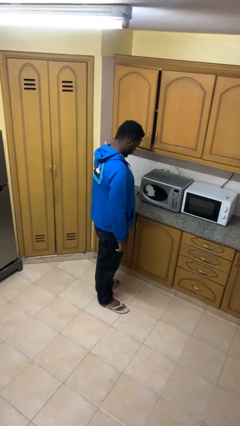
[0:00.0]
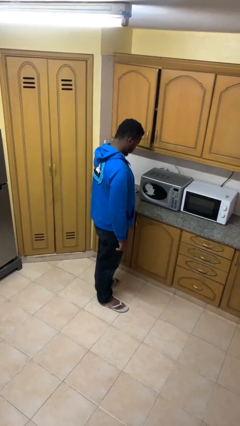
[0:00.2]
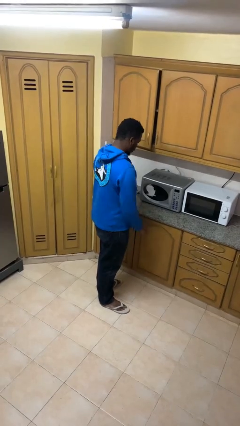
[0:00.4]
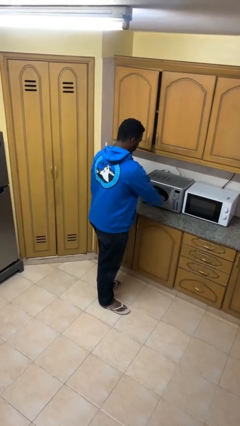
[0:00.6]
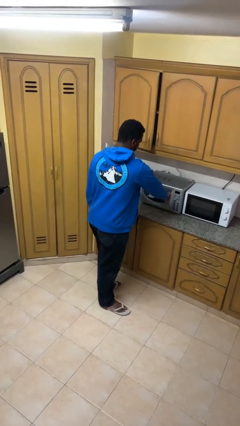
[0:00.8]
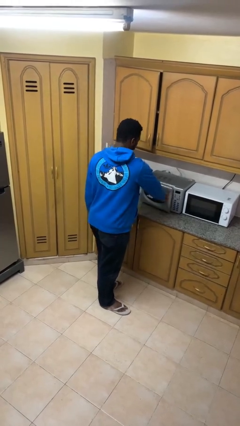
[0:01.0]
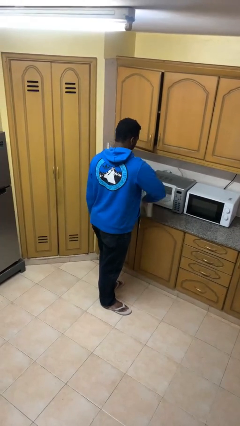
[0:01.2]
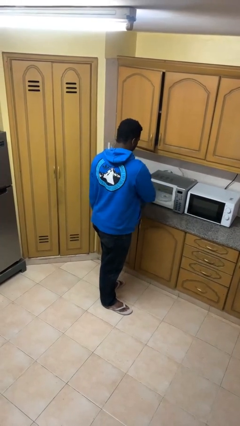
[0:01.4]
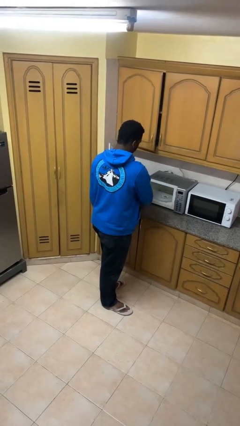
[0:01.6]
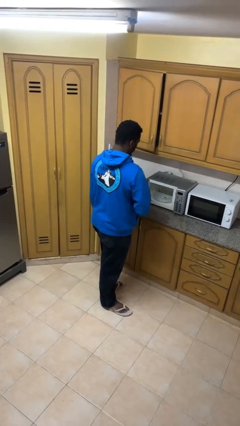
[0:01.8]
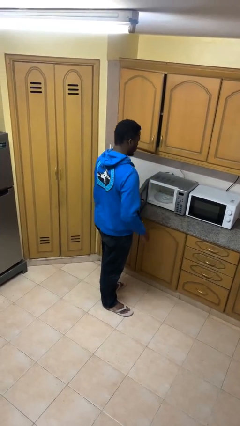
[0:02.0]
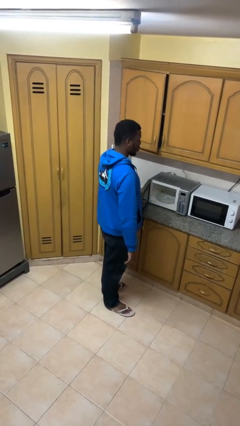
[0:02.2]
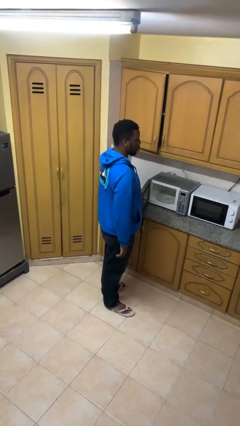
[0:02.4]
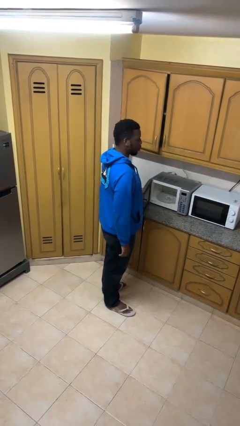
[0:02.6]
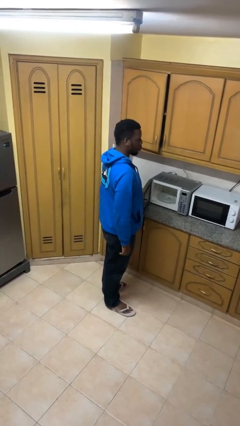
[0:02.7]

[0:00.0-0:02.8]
person opens microwave

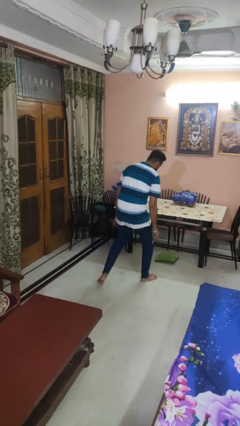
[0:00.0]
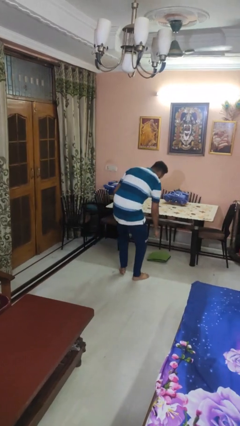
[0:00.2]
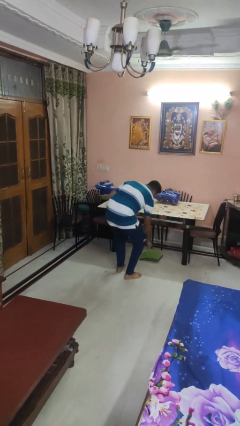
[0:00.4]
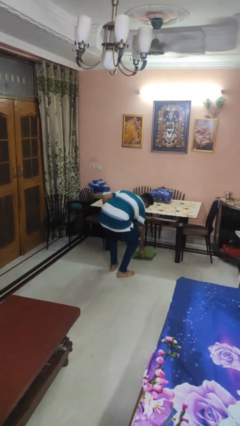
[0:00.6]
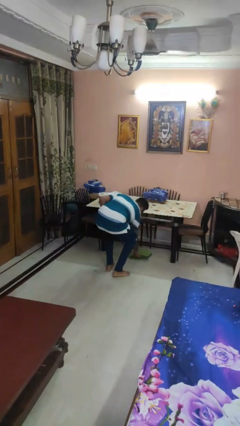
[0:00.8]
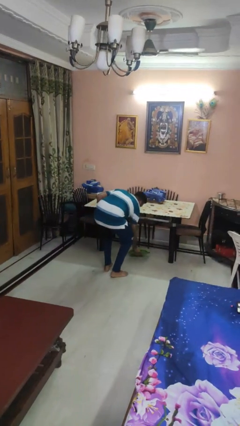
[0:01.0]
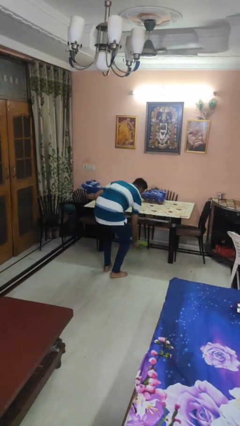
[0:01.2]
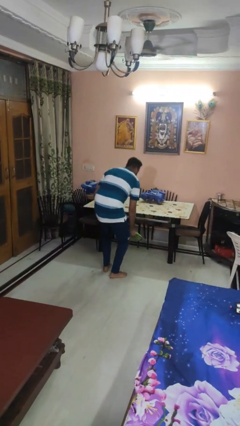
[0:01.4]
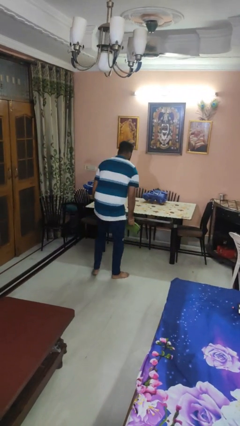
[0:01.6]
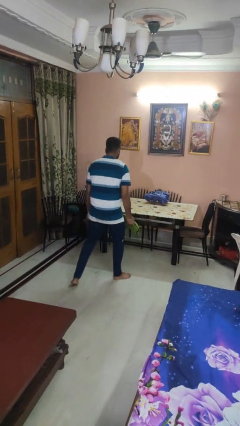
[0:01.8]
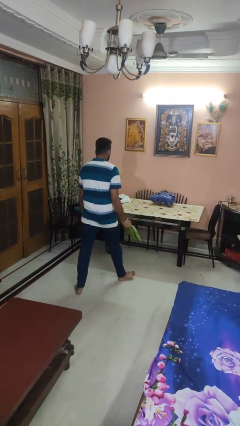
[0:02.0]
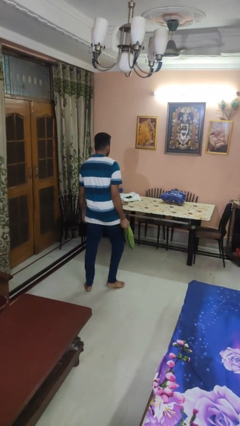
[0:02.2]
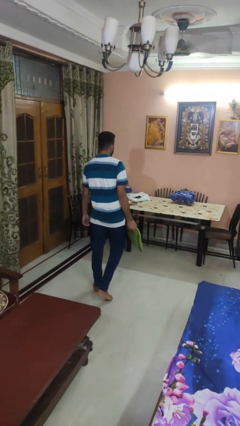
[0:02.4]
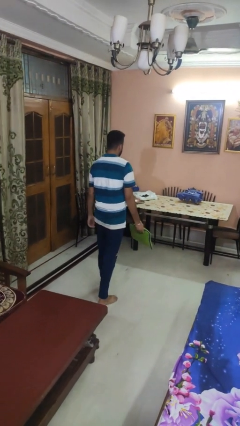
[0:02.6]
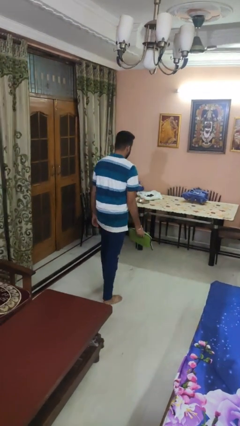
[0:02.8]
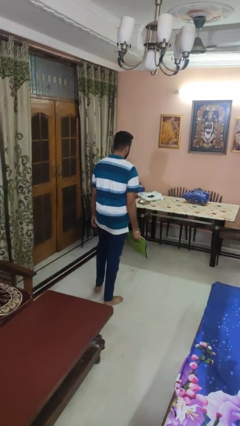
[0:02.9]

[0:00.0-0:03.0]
person picks up object from floor

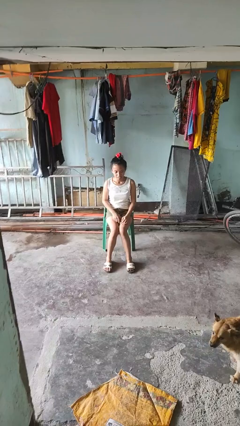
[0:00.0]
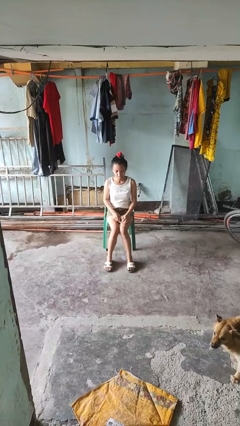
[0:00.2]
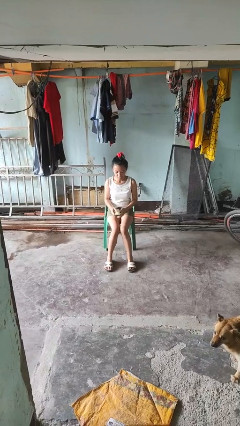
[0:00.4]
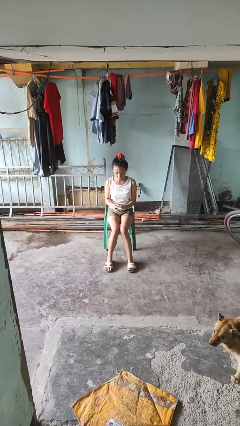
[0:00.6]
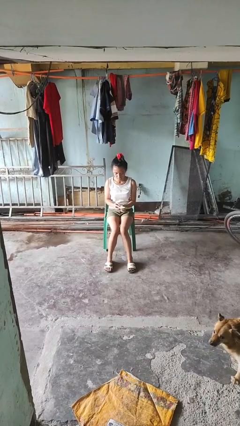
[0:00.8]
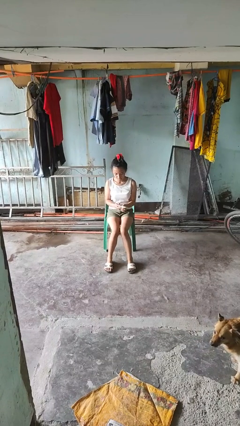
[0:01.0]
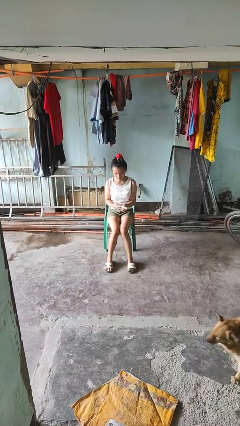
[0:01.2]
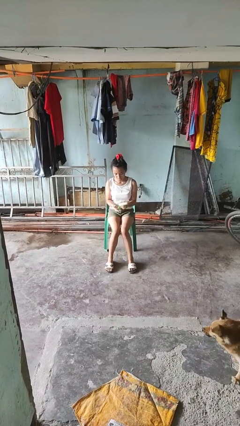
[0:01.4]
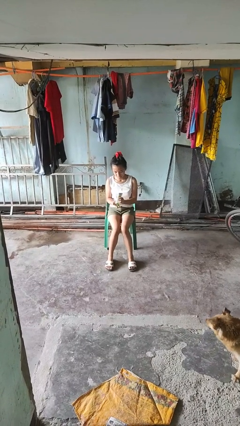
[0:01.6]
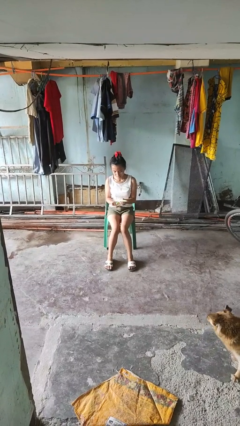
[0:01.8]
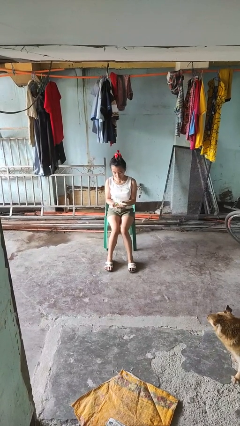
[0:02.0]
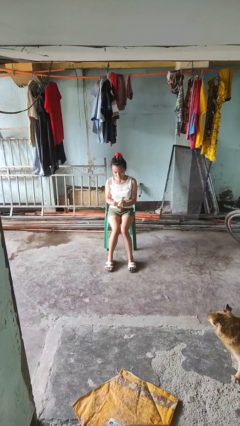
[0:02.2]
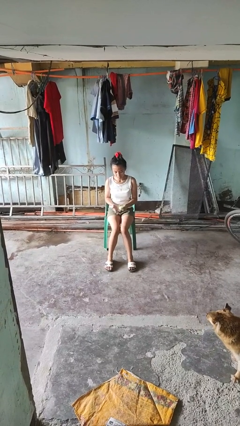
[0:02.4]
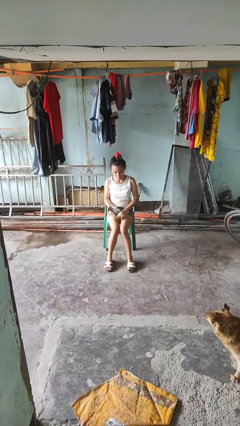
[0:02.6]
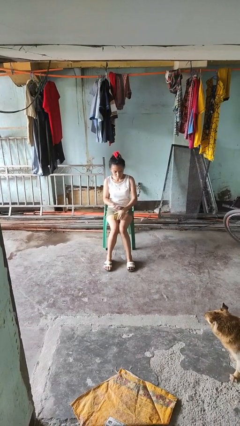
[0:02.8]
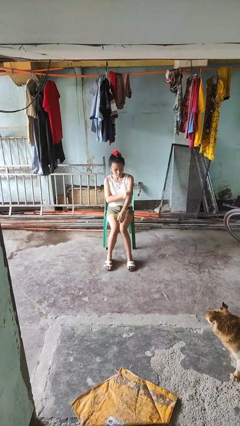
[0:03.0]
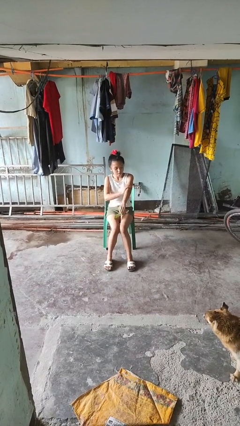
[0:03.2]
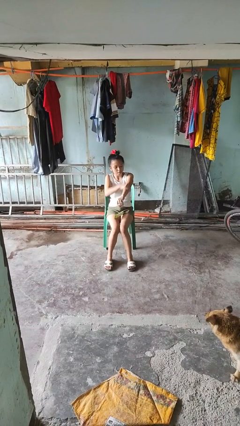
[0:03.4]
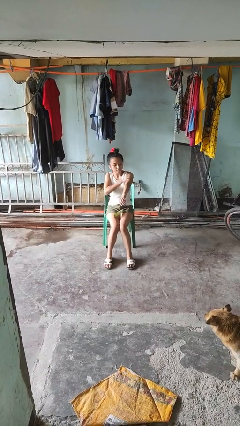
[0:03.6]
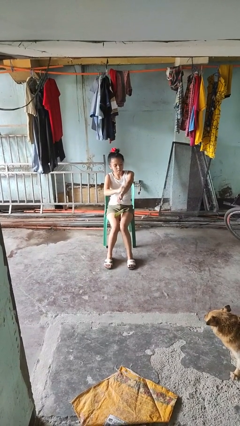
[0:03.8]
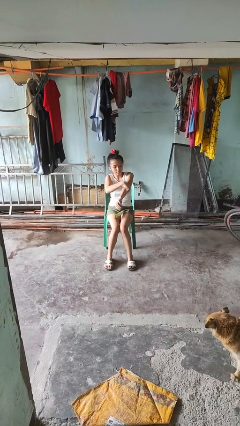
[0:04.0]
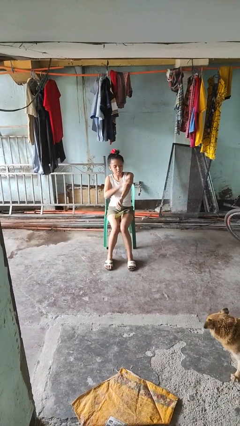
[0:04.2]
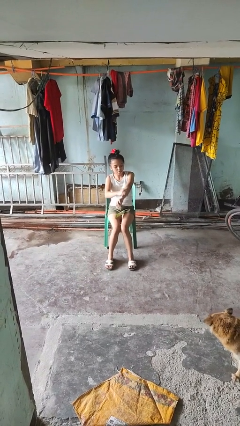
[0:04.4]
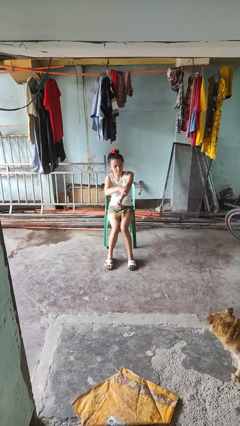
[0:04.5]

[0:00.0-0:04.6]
person applies sunscreen

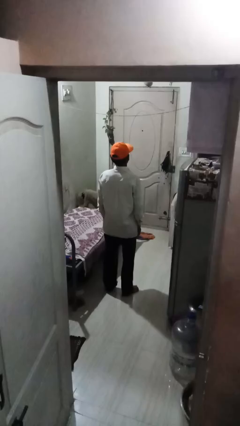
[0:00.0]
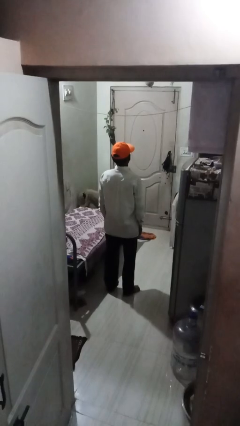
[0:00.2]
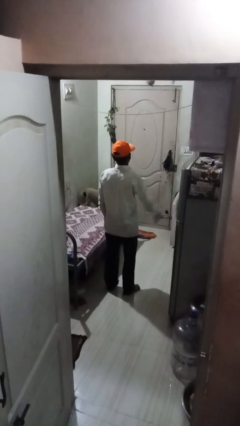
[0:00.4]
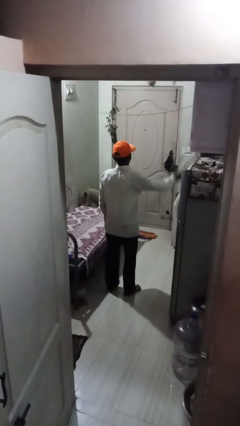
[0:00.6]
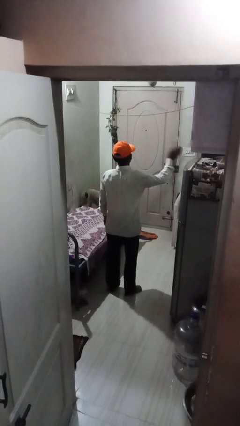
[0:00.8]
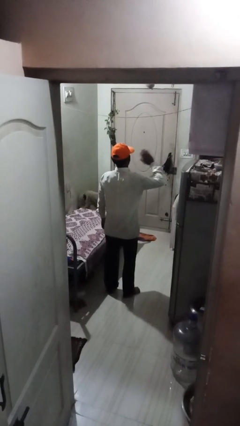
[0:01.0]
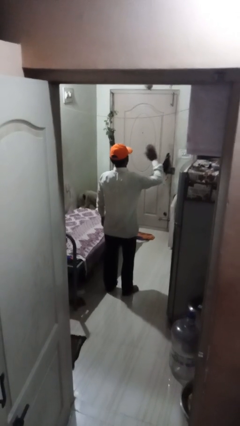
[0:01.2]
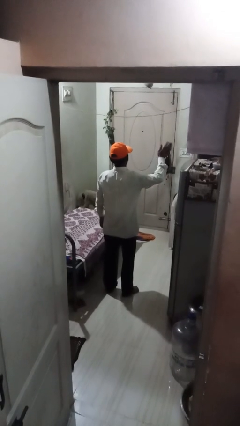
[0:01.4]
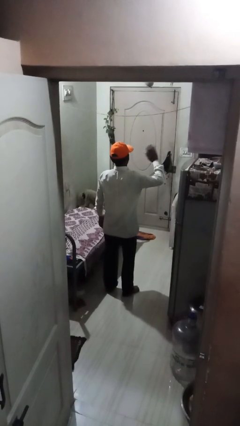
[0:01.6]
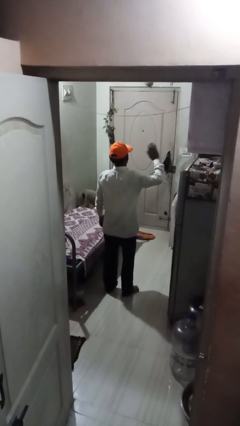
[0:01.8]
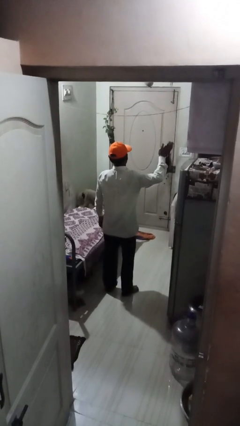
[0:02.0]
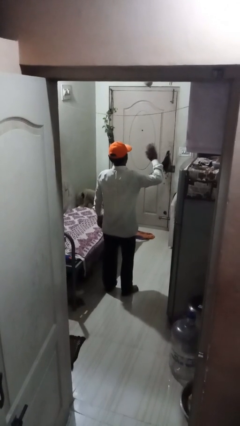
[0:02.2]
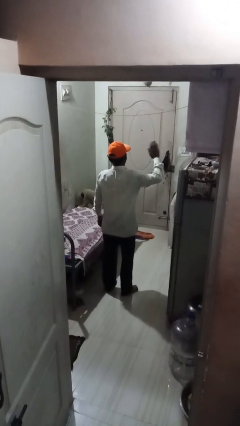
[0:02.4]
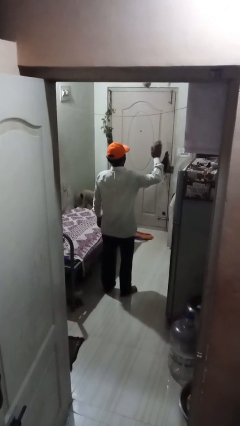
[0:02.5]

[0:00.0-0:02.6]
person waves at person

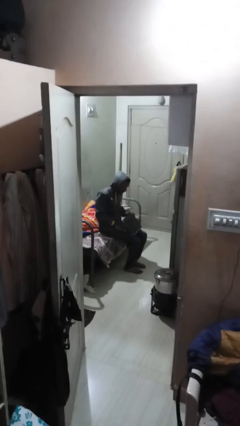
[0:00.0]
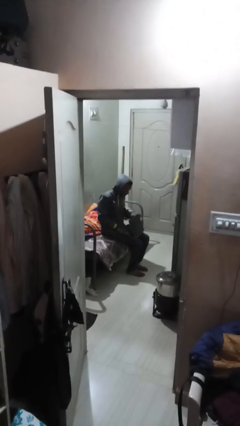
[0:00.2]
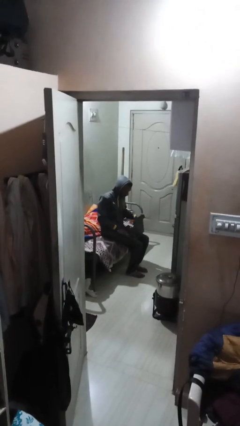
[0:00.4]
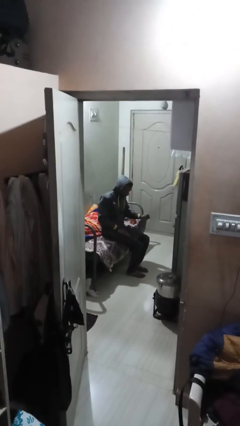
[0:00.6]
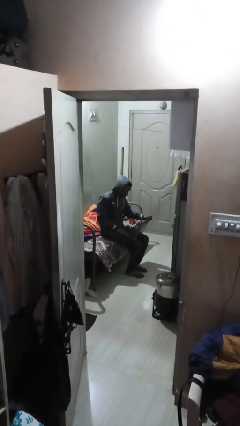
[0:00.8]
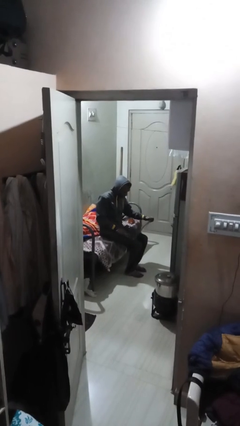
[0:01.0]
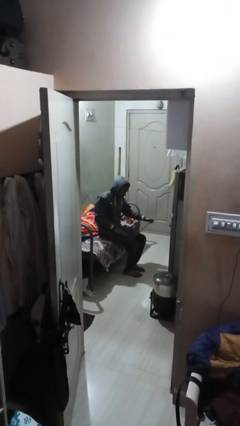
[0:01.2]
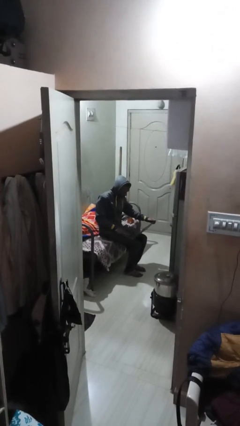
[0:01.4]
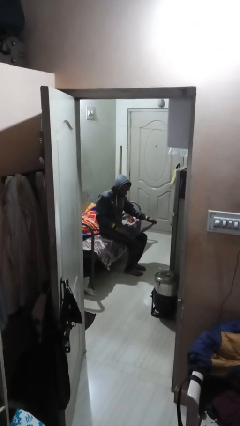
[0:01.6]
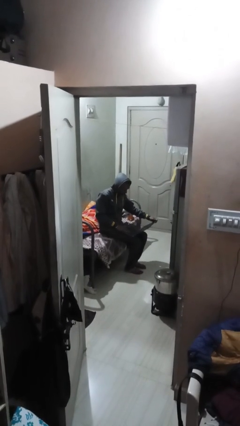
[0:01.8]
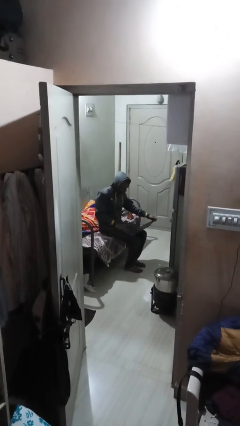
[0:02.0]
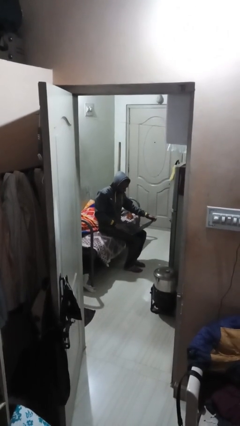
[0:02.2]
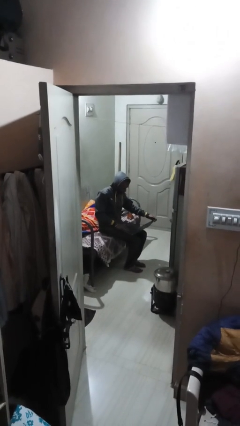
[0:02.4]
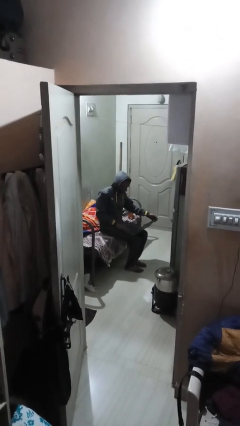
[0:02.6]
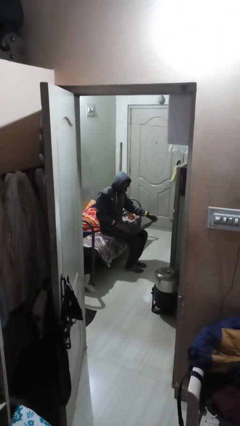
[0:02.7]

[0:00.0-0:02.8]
person interacts with laptop

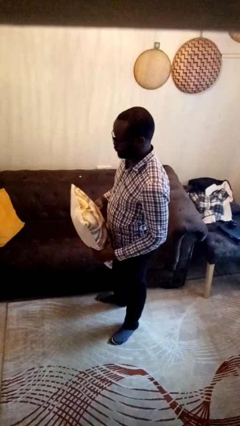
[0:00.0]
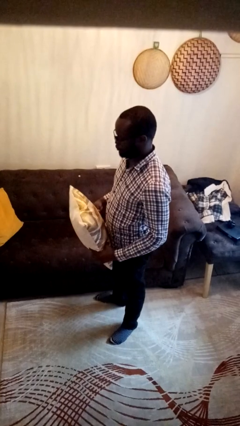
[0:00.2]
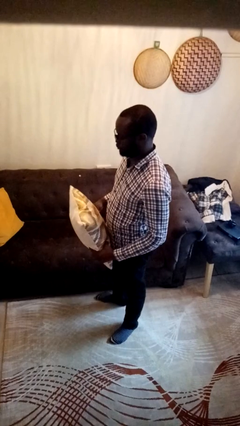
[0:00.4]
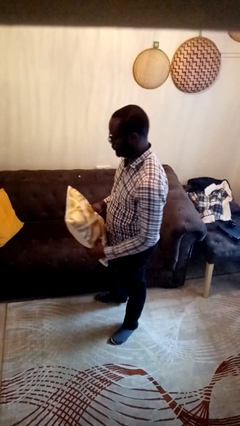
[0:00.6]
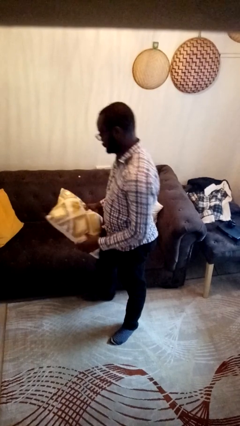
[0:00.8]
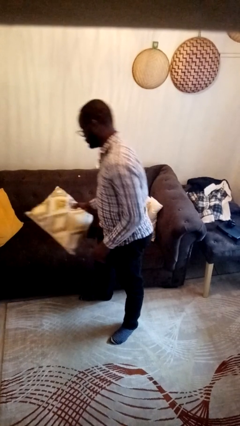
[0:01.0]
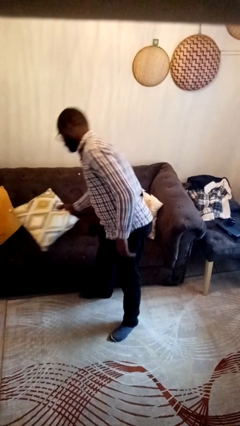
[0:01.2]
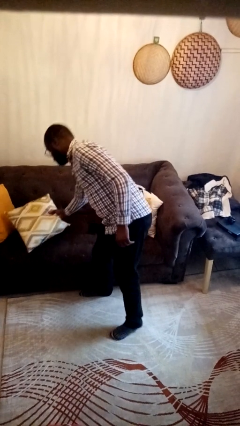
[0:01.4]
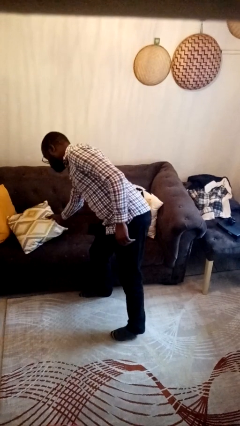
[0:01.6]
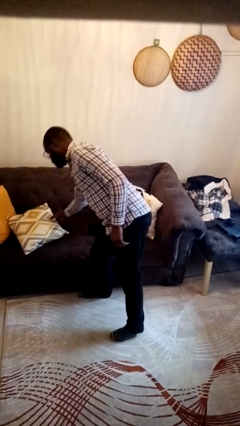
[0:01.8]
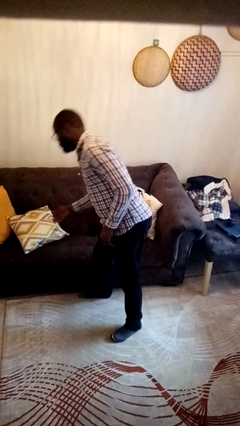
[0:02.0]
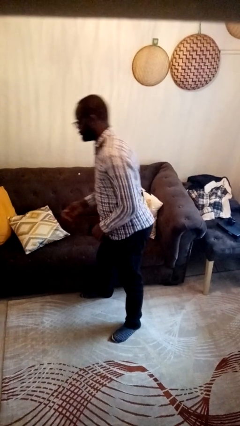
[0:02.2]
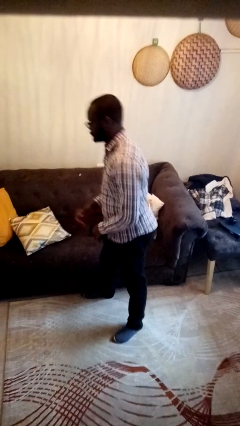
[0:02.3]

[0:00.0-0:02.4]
person puts down object on couch
